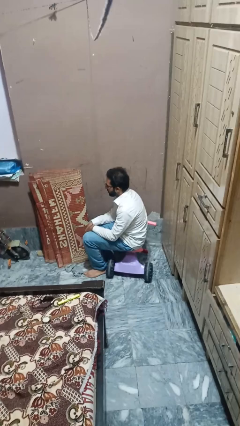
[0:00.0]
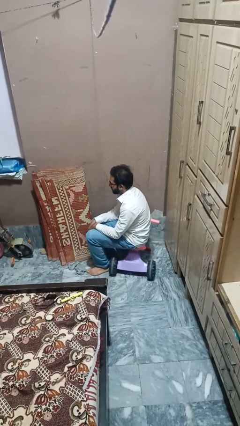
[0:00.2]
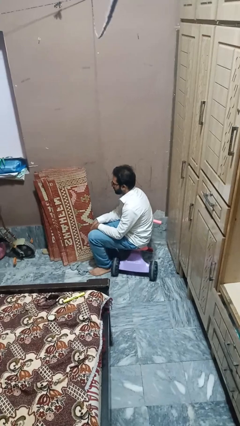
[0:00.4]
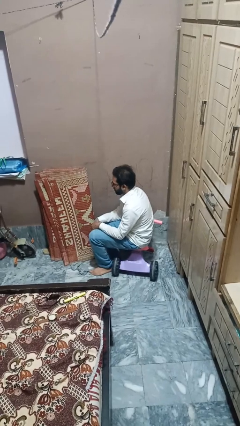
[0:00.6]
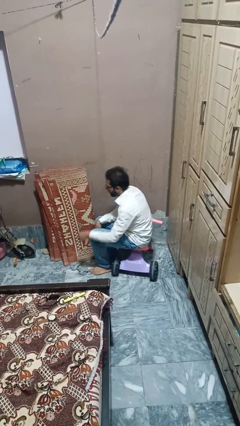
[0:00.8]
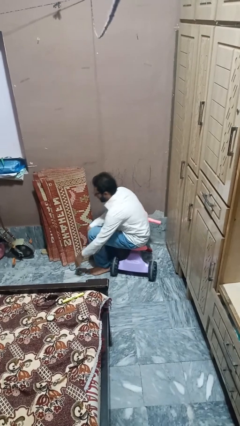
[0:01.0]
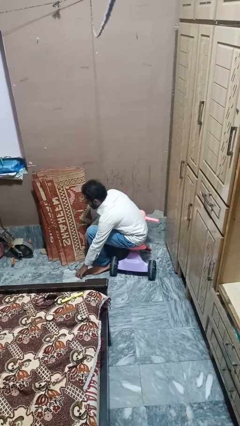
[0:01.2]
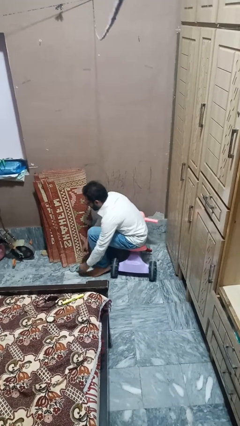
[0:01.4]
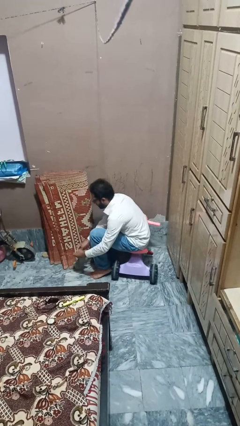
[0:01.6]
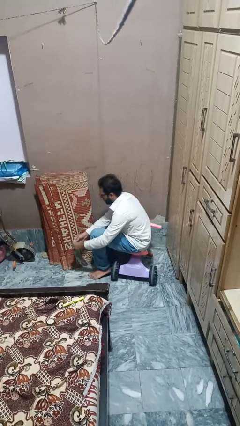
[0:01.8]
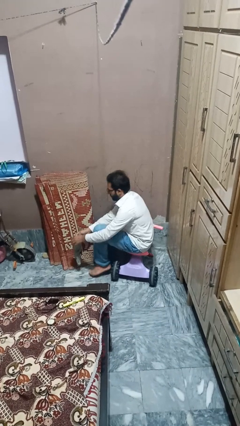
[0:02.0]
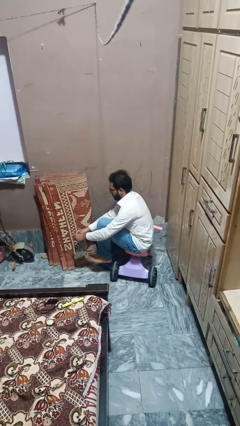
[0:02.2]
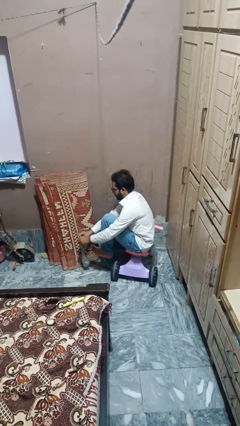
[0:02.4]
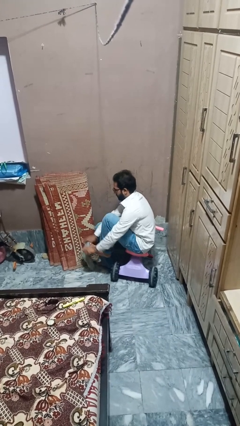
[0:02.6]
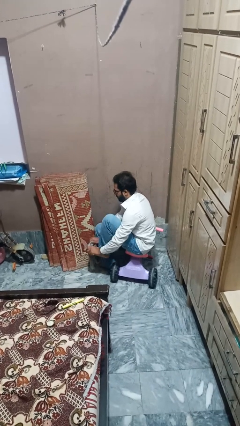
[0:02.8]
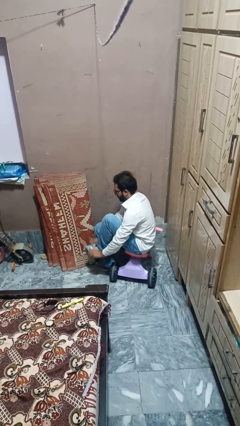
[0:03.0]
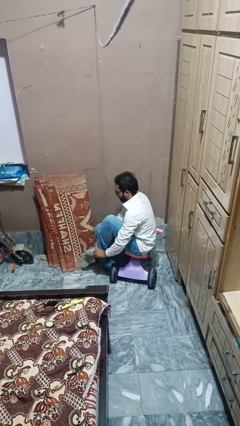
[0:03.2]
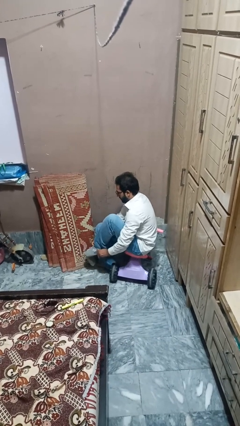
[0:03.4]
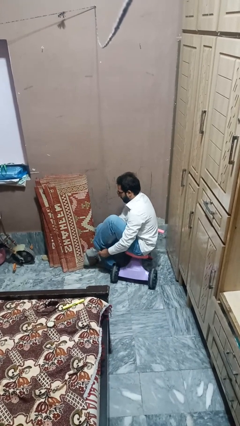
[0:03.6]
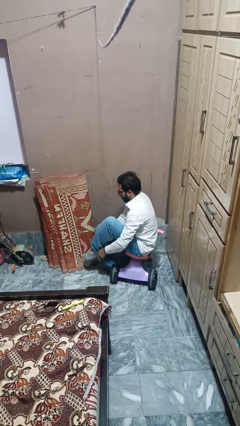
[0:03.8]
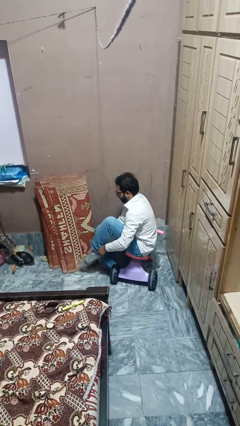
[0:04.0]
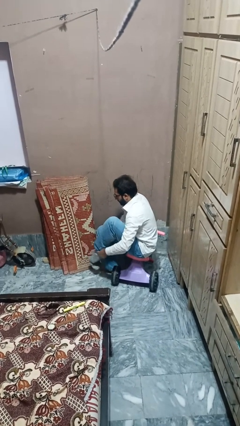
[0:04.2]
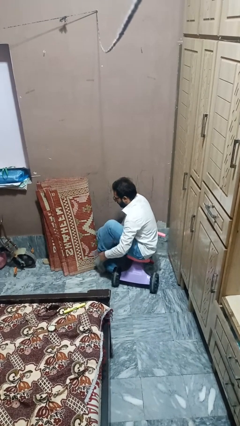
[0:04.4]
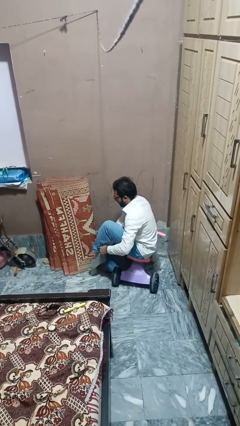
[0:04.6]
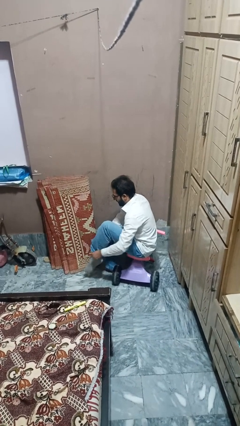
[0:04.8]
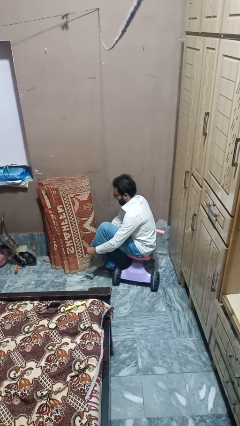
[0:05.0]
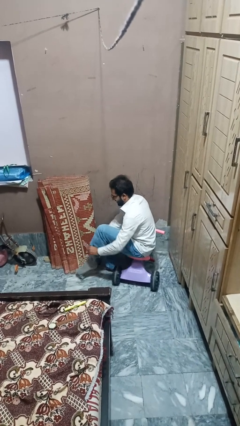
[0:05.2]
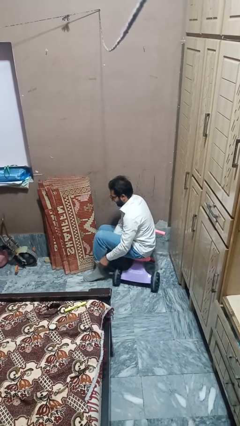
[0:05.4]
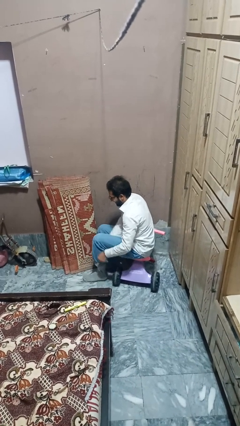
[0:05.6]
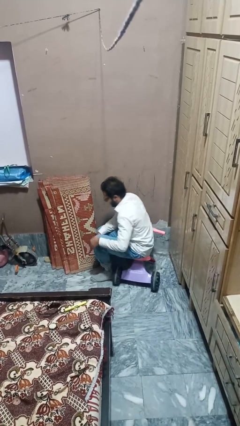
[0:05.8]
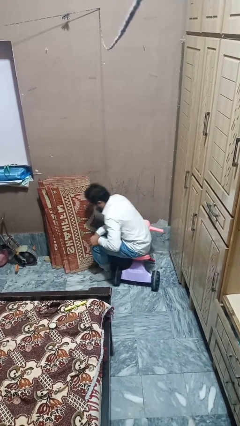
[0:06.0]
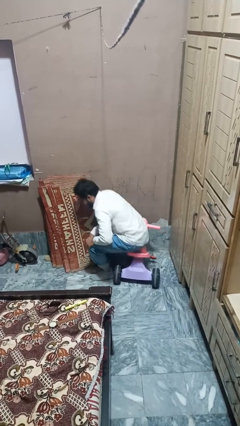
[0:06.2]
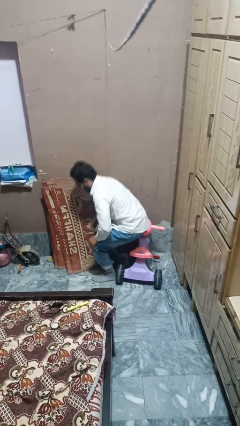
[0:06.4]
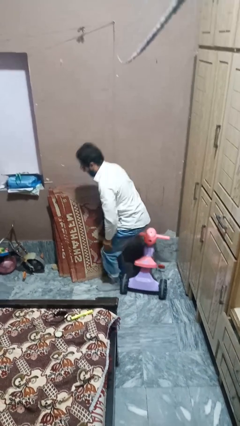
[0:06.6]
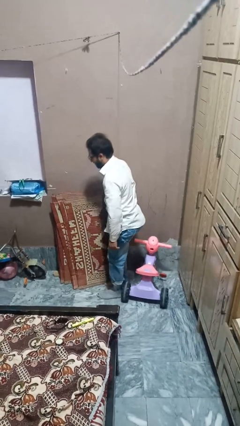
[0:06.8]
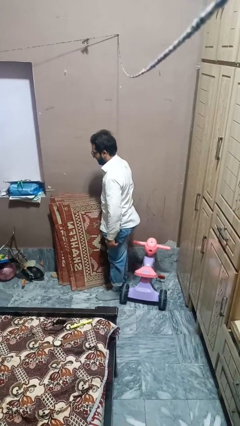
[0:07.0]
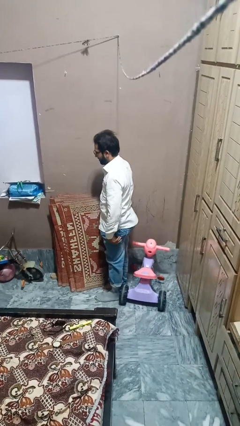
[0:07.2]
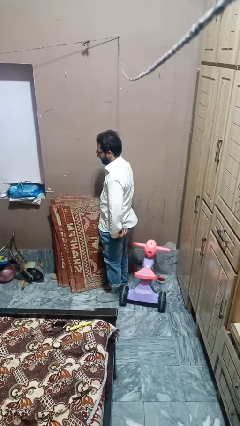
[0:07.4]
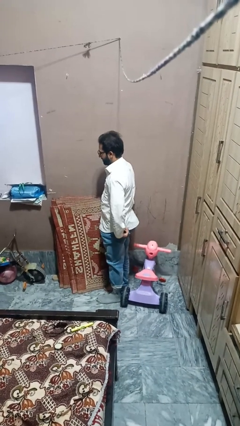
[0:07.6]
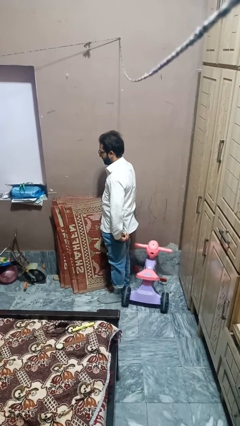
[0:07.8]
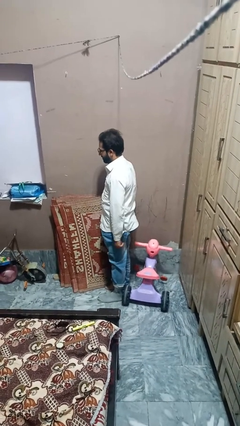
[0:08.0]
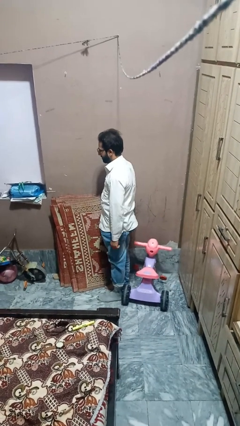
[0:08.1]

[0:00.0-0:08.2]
person puts on socks

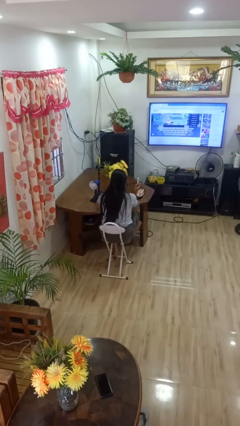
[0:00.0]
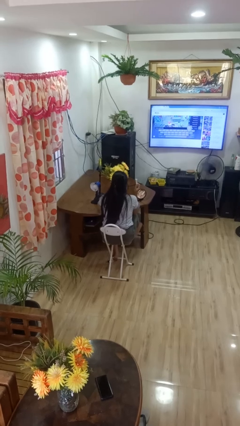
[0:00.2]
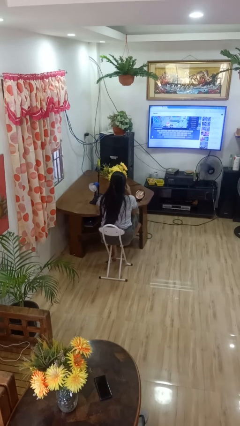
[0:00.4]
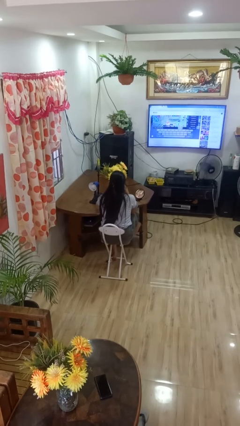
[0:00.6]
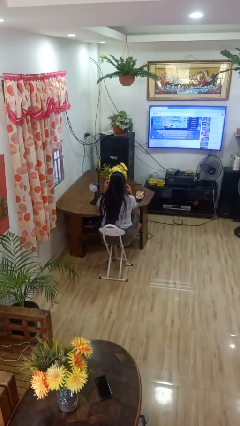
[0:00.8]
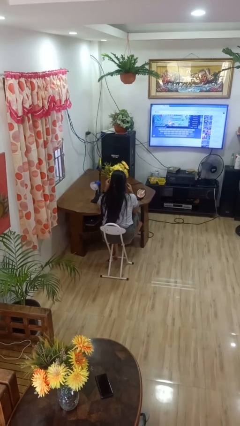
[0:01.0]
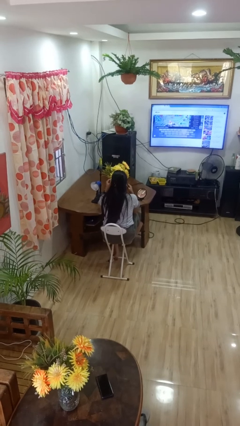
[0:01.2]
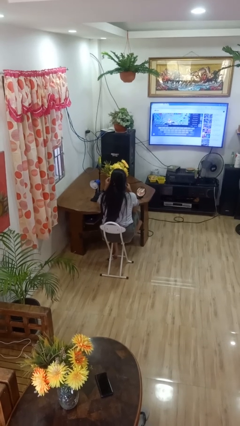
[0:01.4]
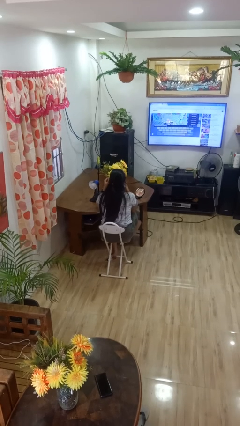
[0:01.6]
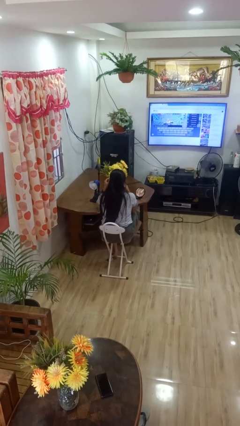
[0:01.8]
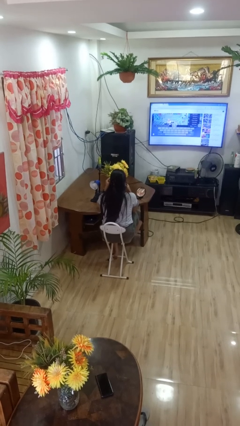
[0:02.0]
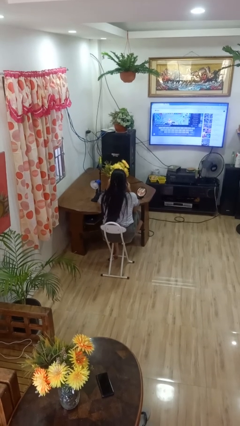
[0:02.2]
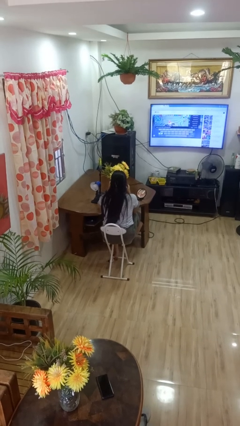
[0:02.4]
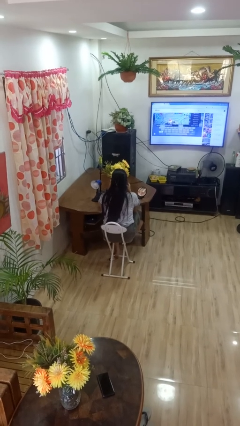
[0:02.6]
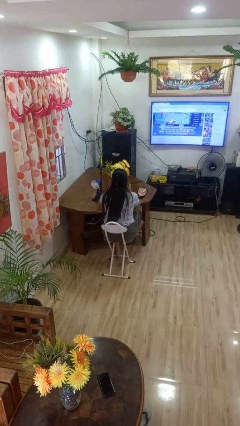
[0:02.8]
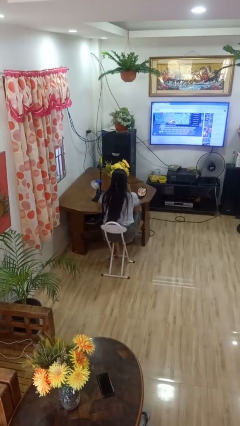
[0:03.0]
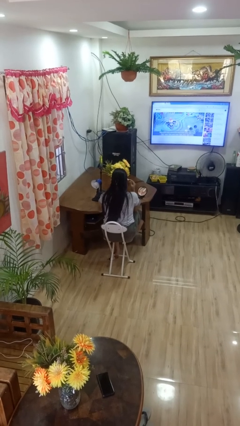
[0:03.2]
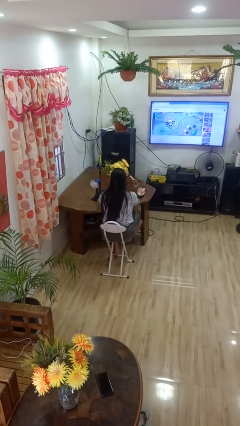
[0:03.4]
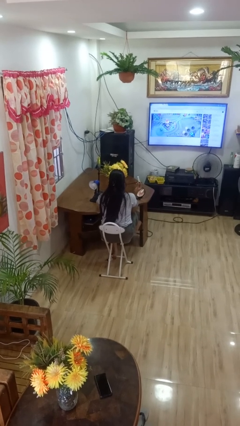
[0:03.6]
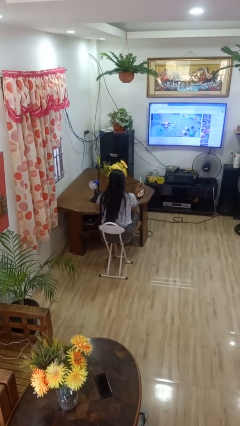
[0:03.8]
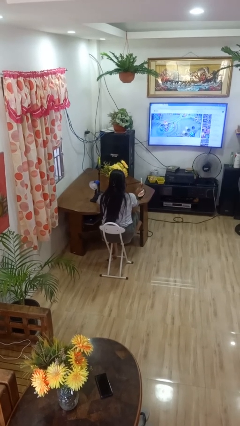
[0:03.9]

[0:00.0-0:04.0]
person applies lip makeup

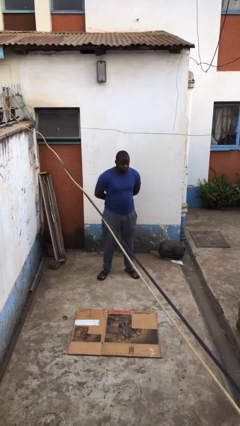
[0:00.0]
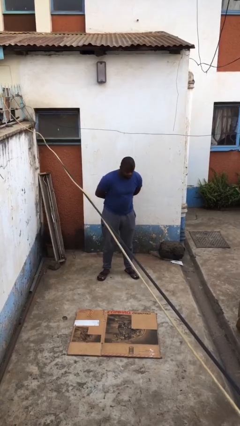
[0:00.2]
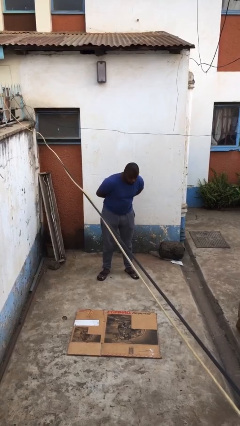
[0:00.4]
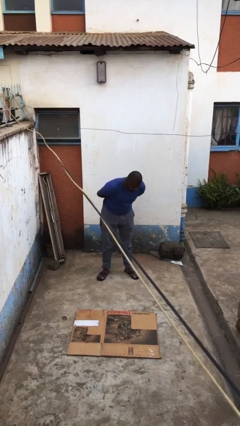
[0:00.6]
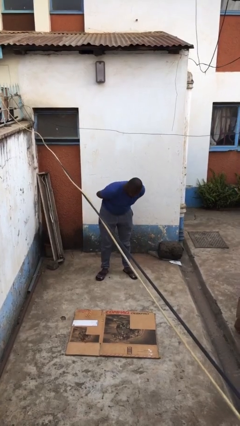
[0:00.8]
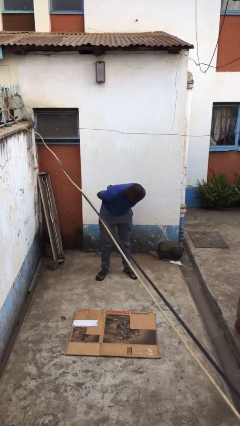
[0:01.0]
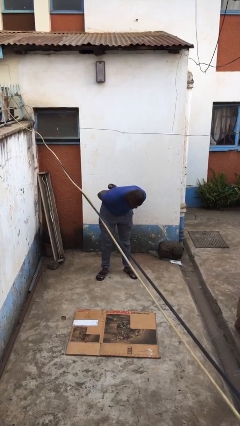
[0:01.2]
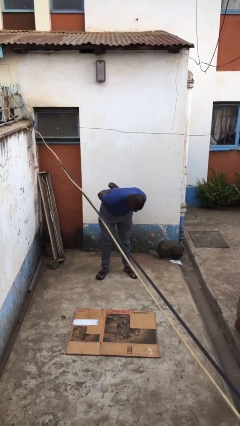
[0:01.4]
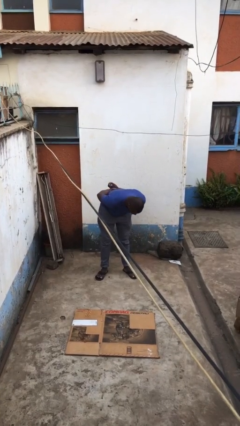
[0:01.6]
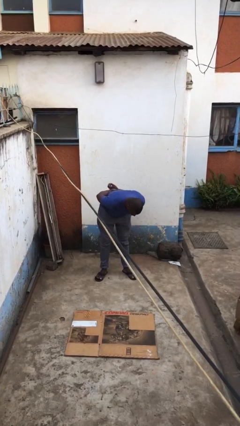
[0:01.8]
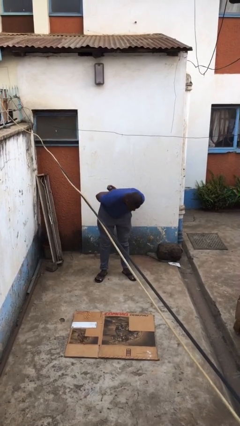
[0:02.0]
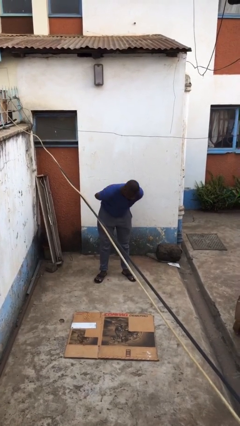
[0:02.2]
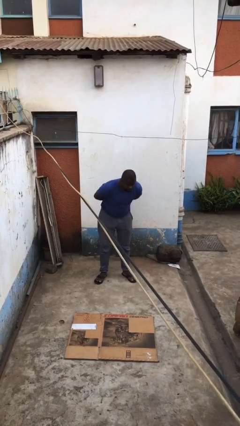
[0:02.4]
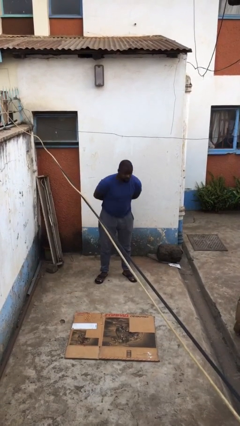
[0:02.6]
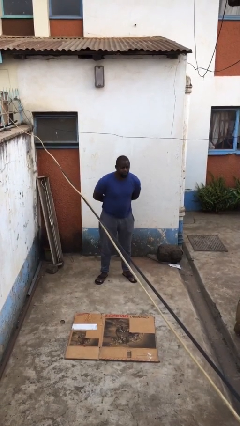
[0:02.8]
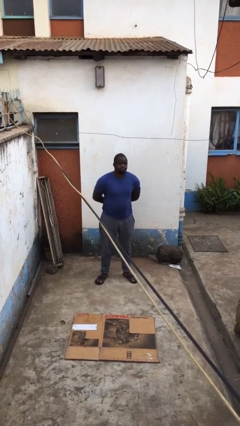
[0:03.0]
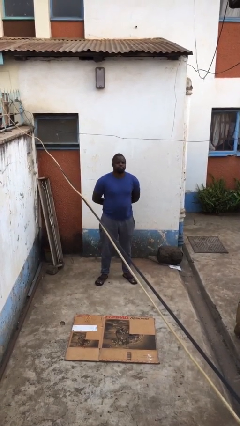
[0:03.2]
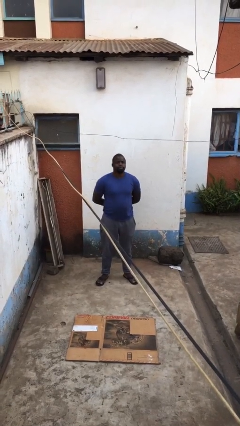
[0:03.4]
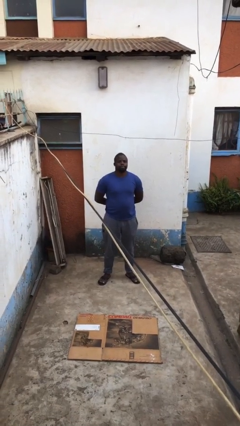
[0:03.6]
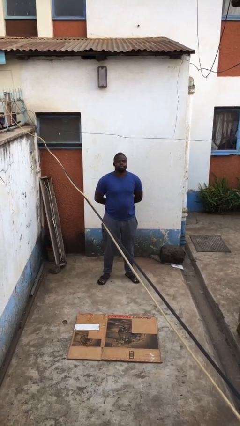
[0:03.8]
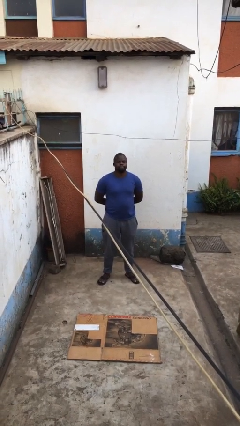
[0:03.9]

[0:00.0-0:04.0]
person bows

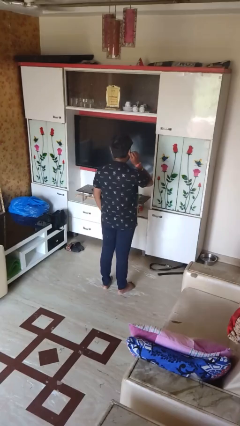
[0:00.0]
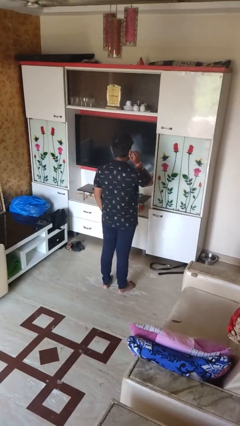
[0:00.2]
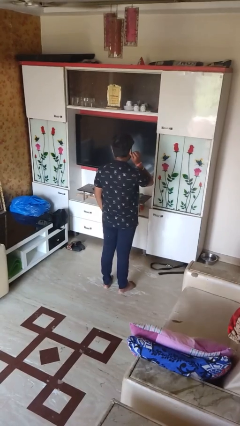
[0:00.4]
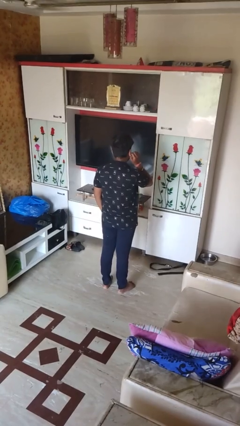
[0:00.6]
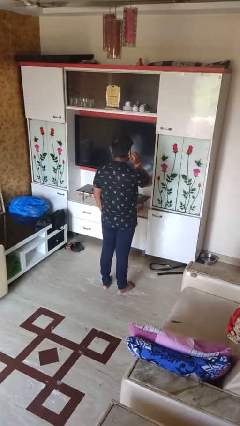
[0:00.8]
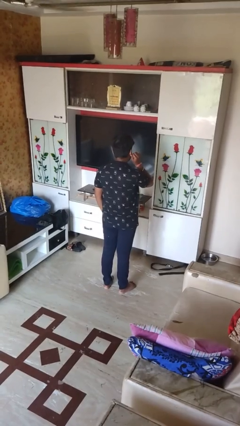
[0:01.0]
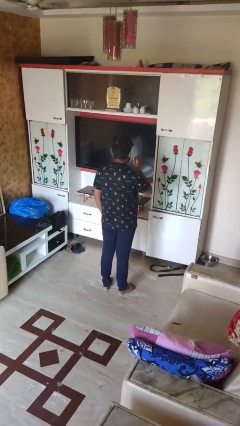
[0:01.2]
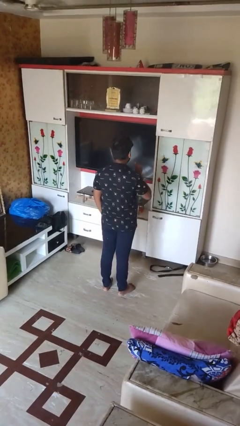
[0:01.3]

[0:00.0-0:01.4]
person touches earlobe
